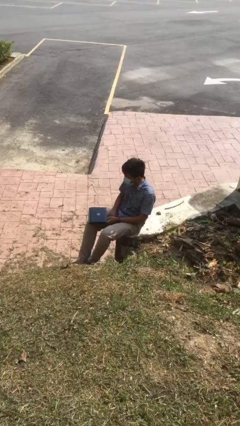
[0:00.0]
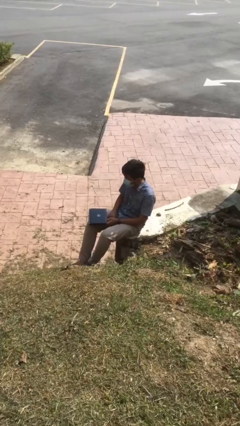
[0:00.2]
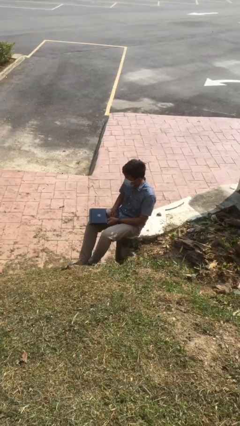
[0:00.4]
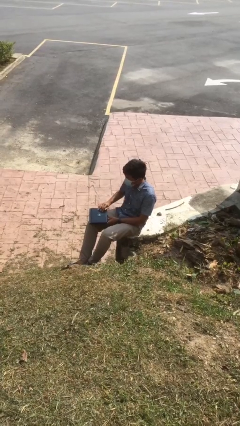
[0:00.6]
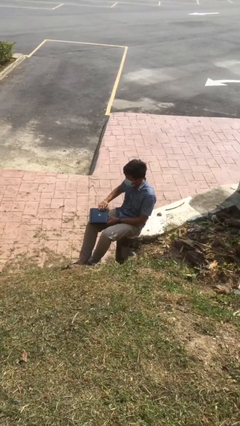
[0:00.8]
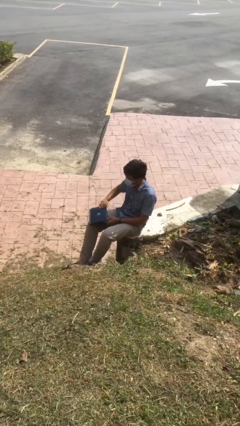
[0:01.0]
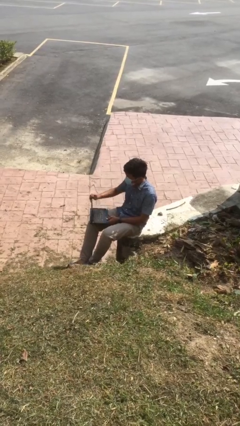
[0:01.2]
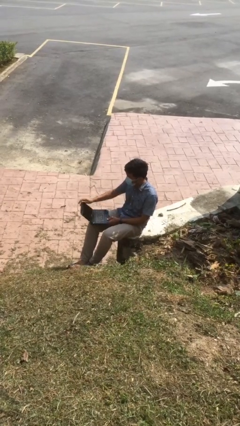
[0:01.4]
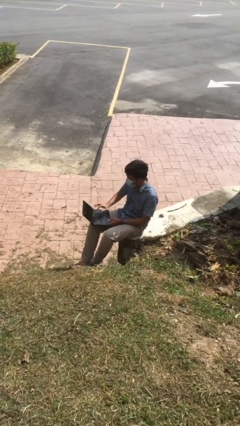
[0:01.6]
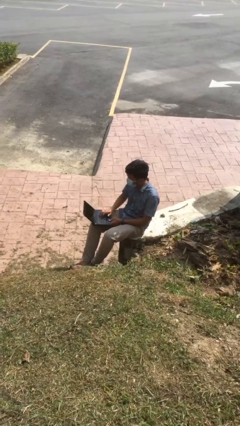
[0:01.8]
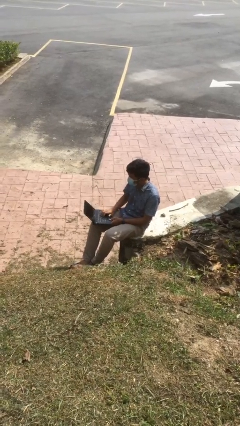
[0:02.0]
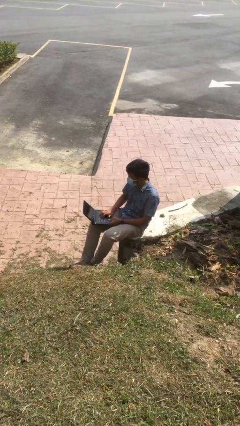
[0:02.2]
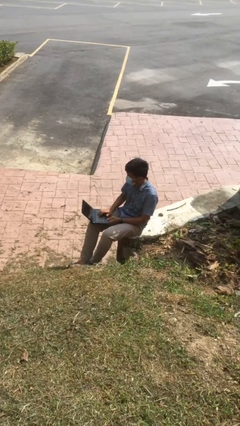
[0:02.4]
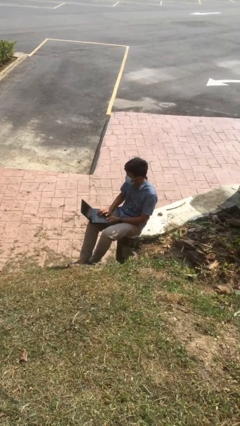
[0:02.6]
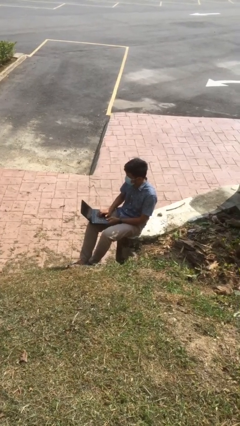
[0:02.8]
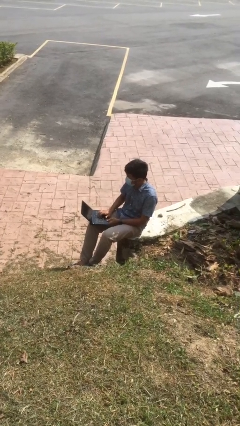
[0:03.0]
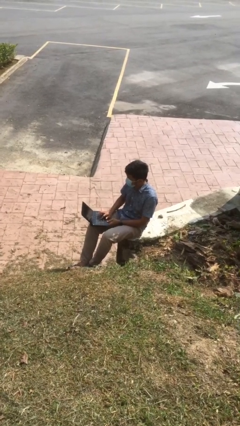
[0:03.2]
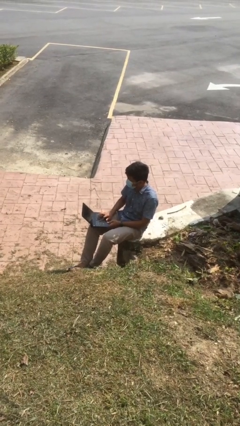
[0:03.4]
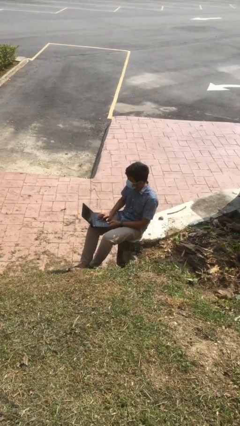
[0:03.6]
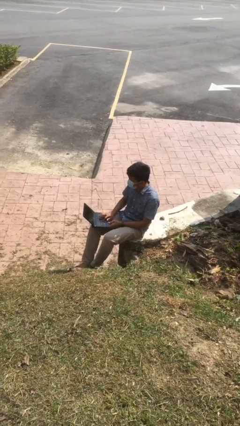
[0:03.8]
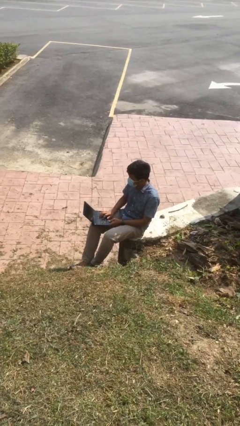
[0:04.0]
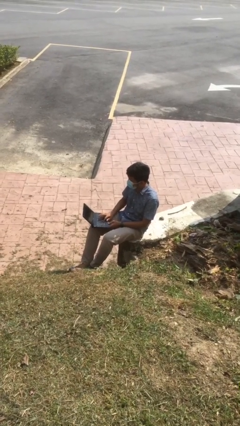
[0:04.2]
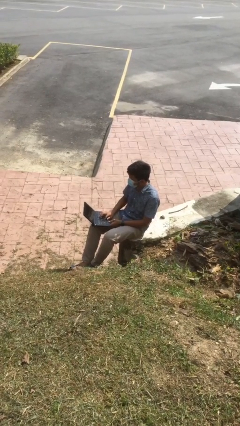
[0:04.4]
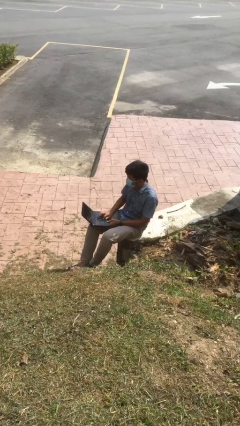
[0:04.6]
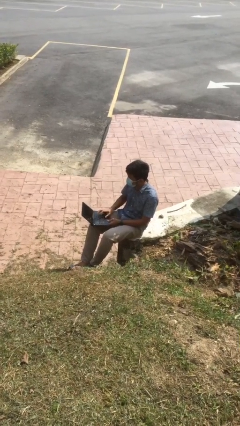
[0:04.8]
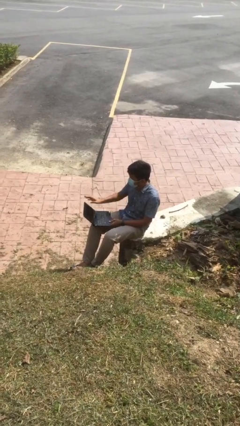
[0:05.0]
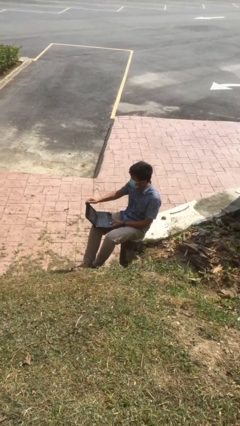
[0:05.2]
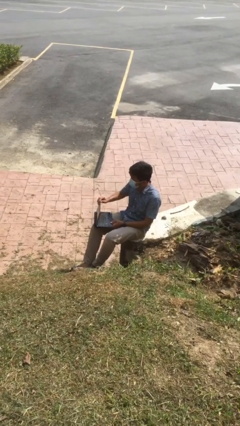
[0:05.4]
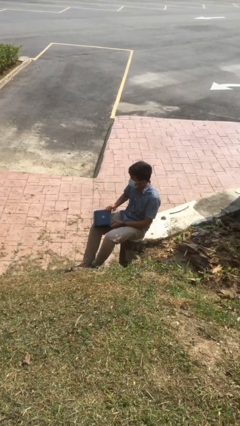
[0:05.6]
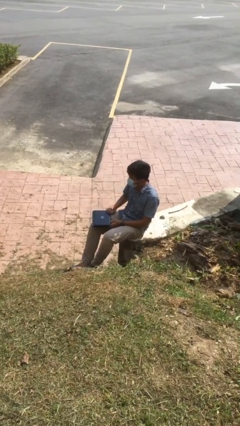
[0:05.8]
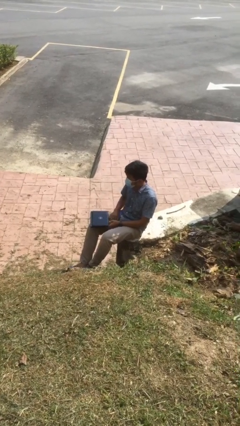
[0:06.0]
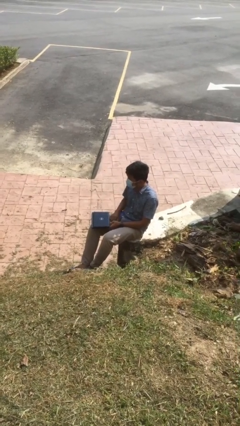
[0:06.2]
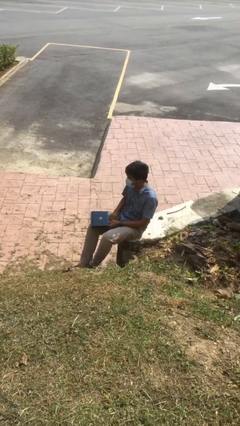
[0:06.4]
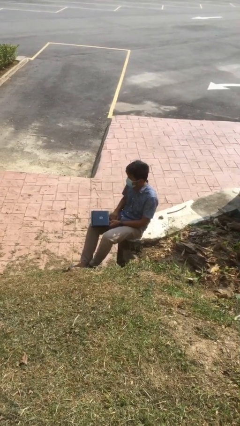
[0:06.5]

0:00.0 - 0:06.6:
person interacts with laptop

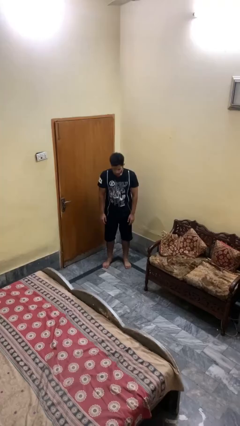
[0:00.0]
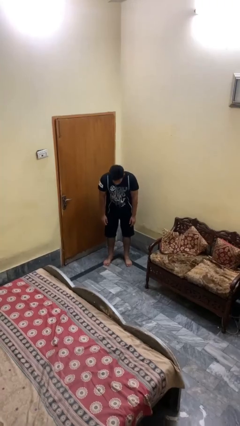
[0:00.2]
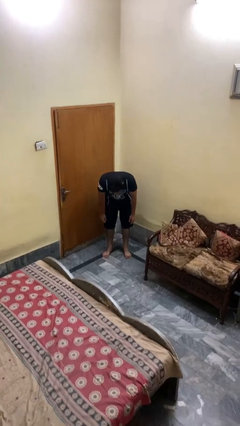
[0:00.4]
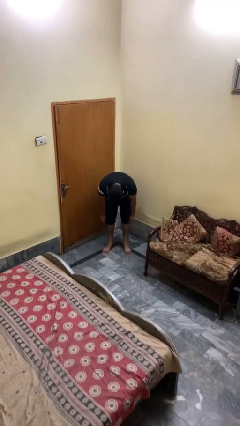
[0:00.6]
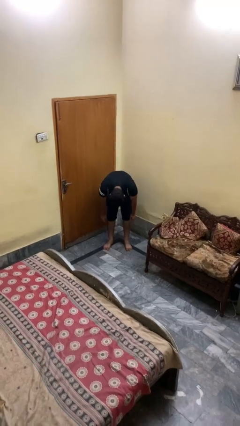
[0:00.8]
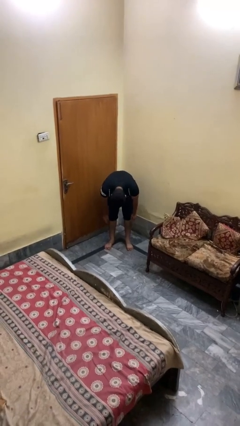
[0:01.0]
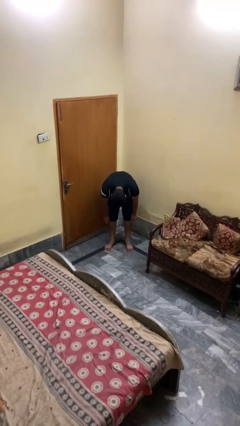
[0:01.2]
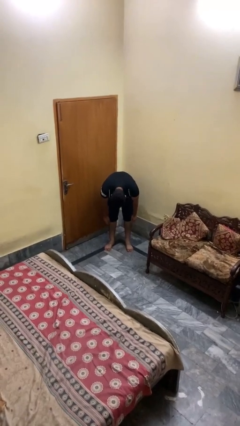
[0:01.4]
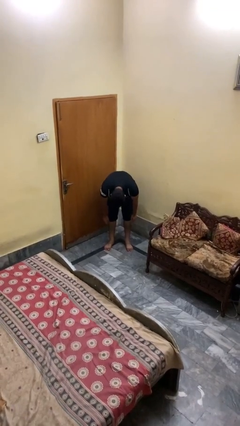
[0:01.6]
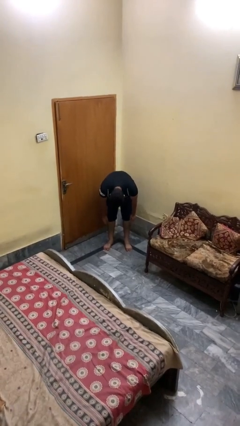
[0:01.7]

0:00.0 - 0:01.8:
person bows

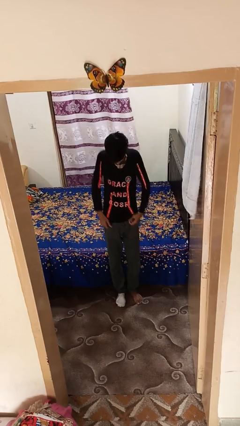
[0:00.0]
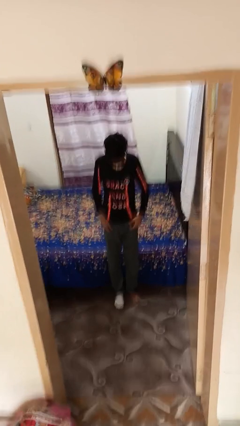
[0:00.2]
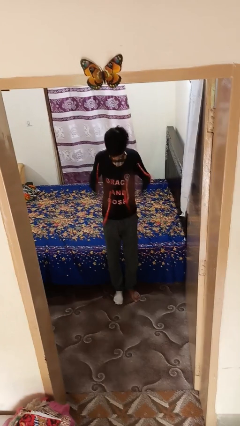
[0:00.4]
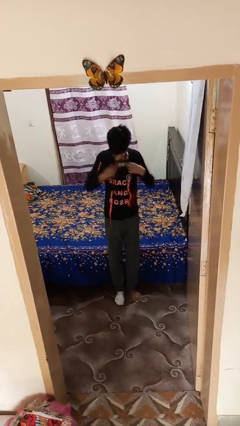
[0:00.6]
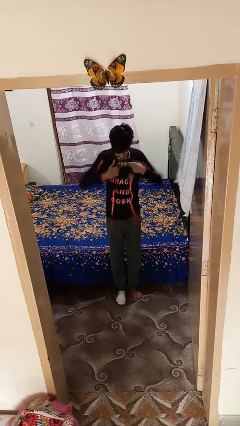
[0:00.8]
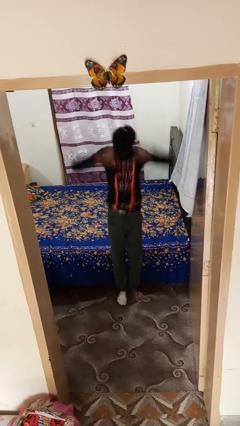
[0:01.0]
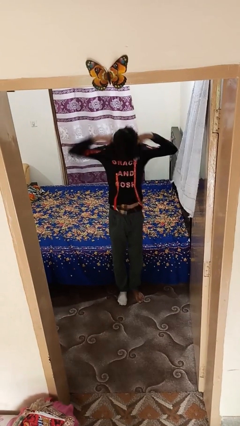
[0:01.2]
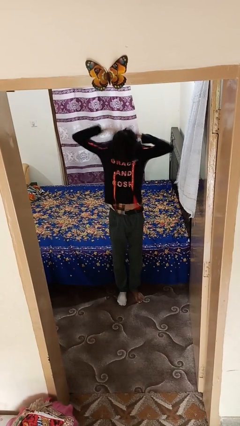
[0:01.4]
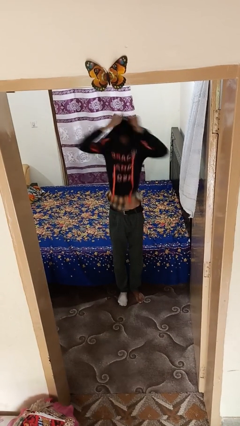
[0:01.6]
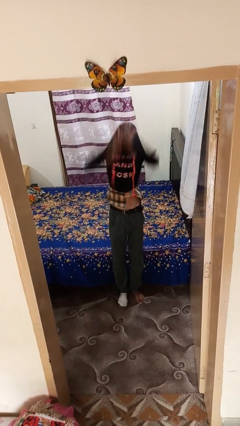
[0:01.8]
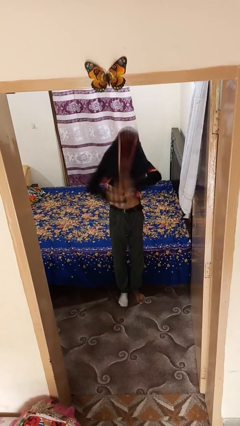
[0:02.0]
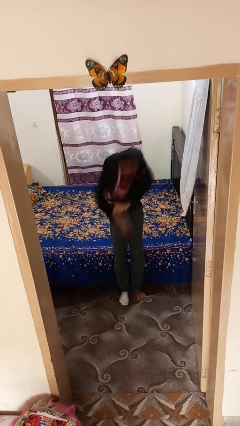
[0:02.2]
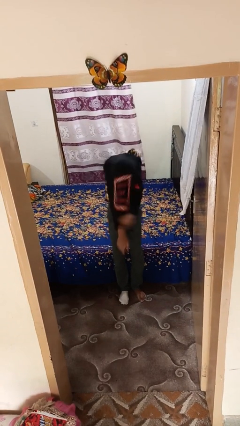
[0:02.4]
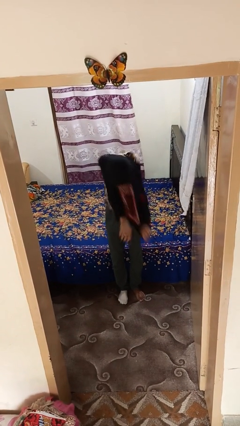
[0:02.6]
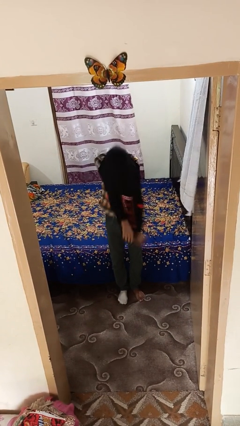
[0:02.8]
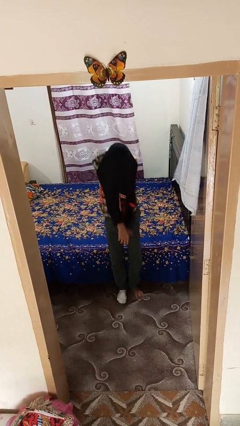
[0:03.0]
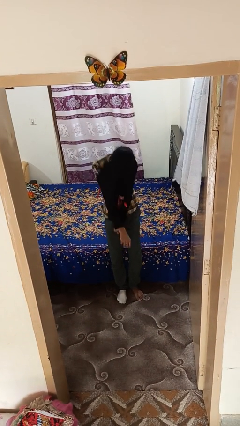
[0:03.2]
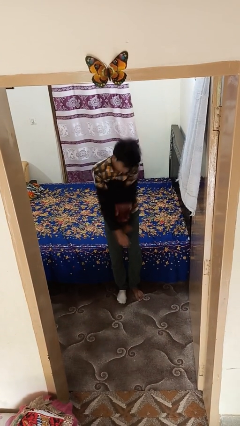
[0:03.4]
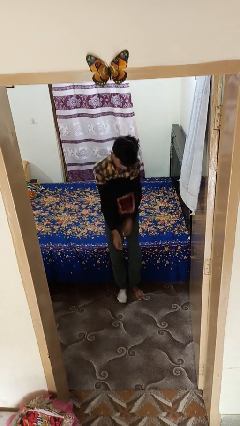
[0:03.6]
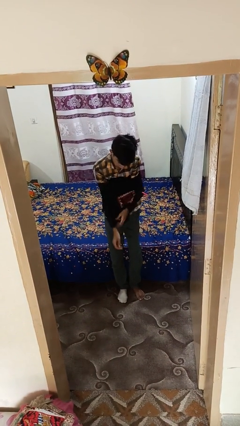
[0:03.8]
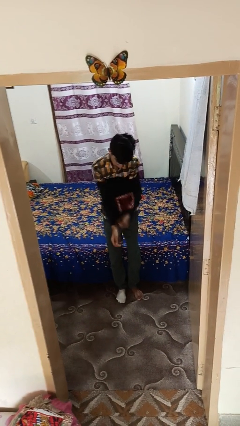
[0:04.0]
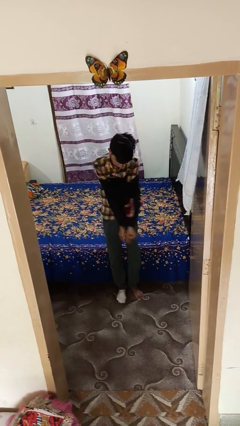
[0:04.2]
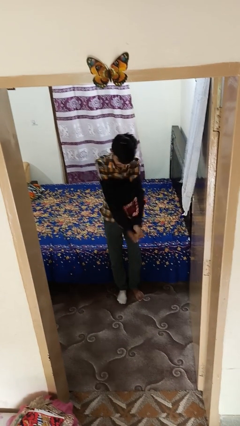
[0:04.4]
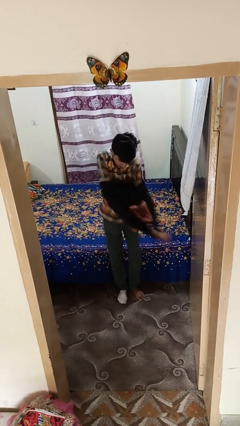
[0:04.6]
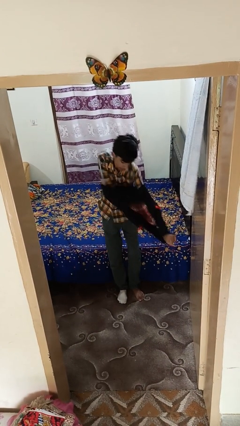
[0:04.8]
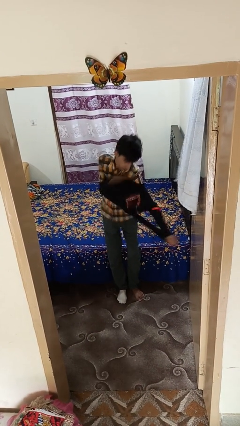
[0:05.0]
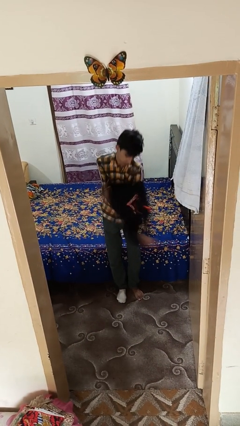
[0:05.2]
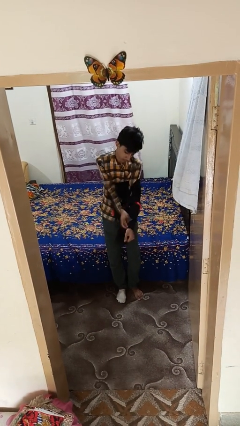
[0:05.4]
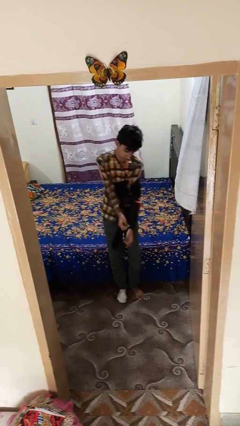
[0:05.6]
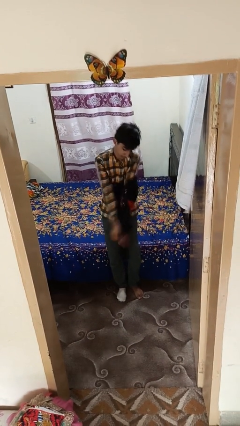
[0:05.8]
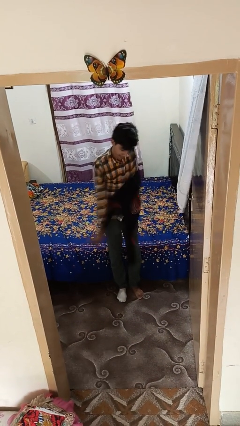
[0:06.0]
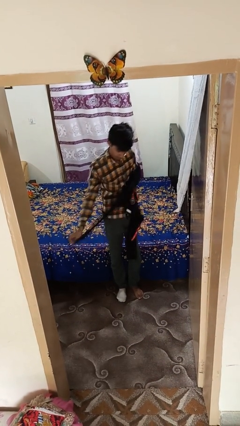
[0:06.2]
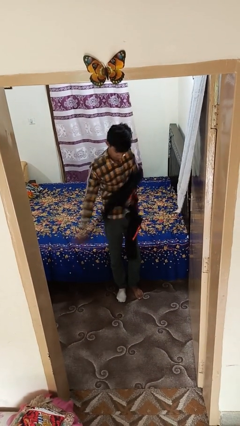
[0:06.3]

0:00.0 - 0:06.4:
person takes off shirt

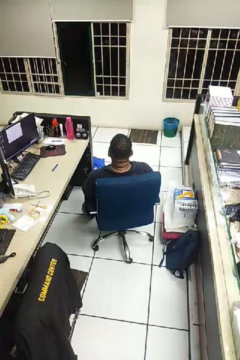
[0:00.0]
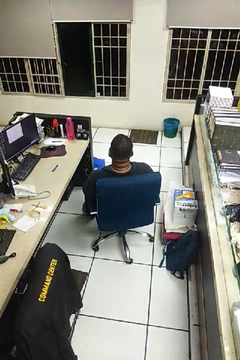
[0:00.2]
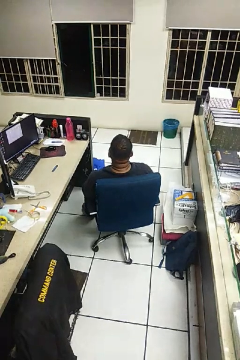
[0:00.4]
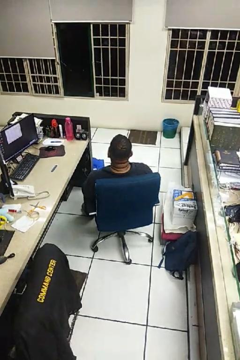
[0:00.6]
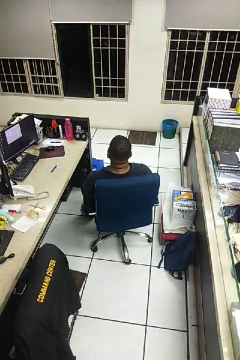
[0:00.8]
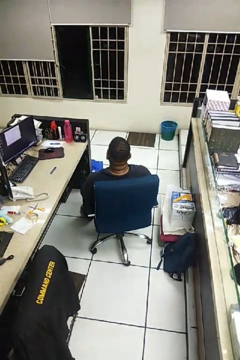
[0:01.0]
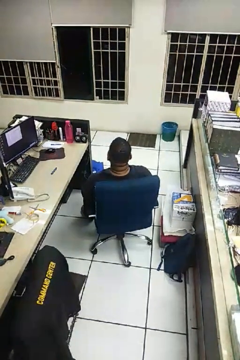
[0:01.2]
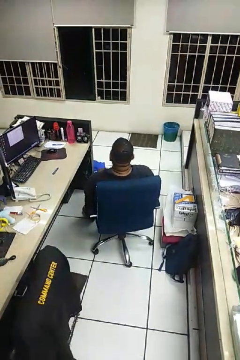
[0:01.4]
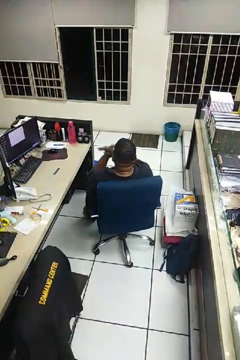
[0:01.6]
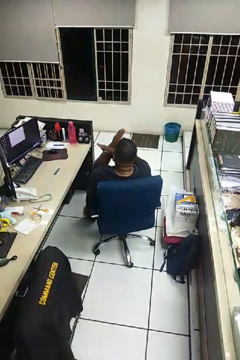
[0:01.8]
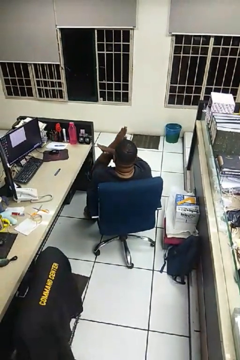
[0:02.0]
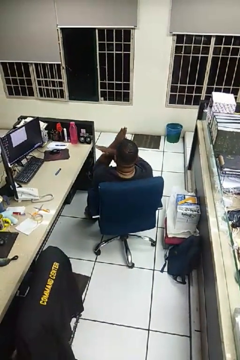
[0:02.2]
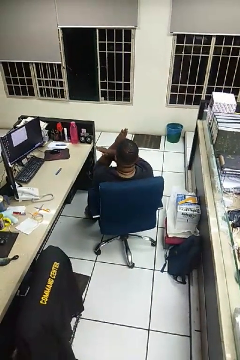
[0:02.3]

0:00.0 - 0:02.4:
person gestures arms x

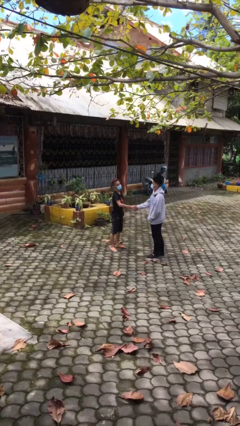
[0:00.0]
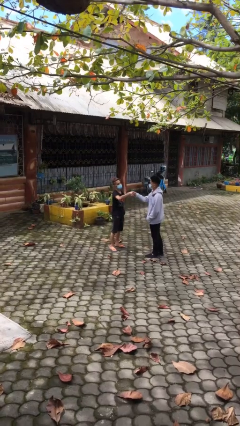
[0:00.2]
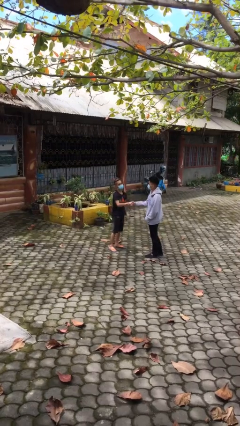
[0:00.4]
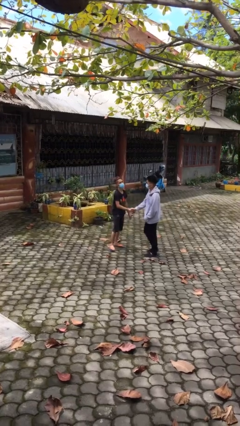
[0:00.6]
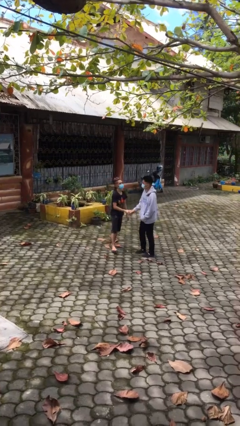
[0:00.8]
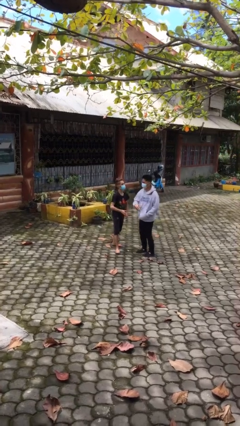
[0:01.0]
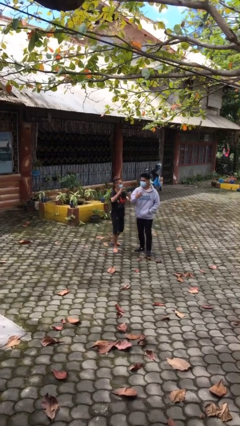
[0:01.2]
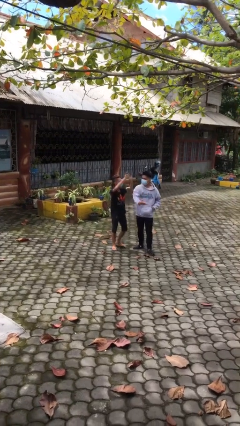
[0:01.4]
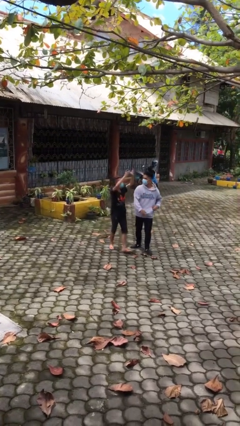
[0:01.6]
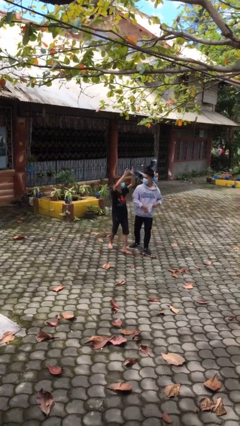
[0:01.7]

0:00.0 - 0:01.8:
person shakes hand
